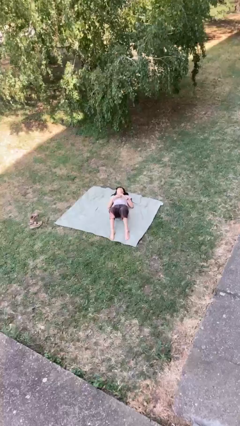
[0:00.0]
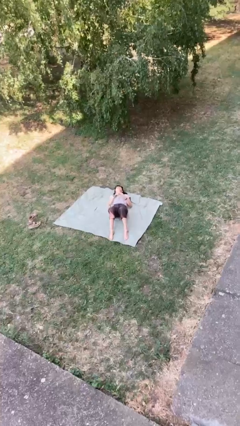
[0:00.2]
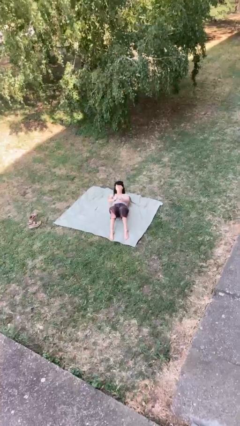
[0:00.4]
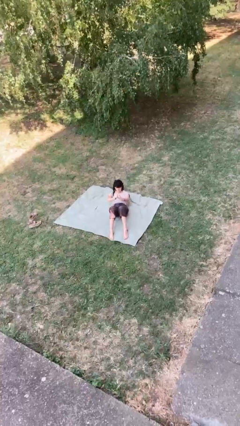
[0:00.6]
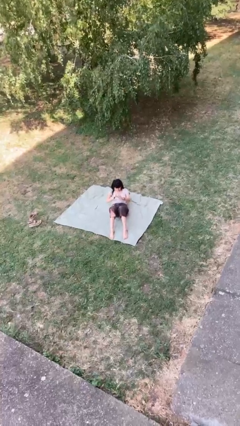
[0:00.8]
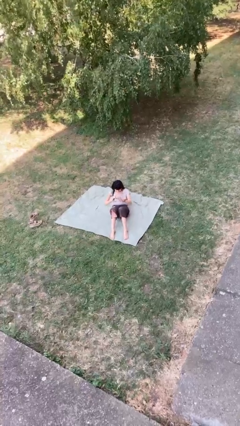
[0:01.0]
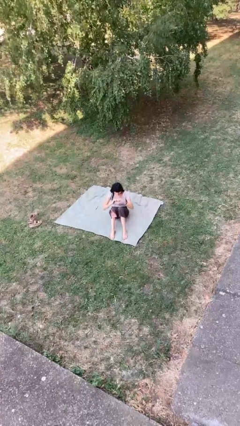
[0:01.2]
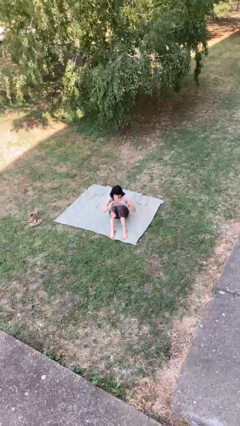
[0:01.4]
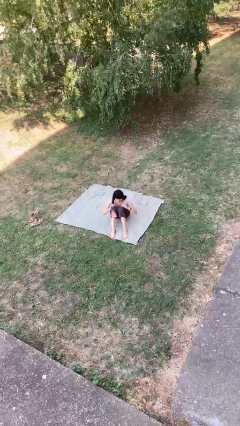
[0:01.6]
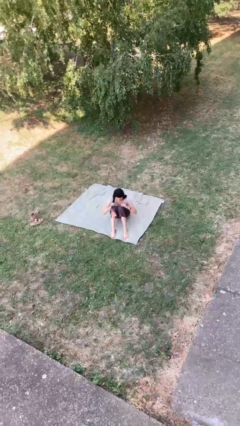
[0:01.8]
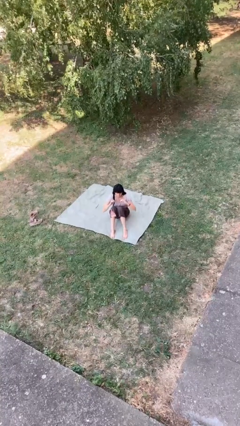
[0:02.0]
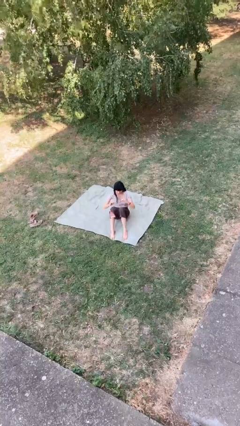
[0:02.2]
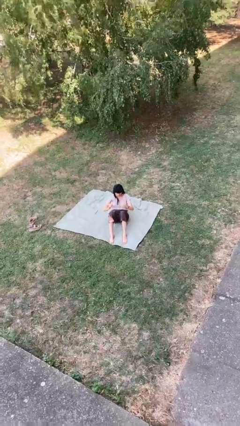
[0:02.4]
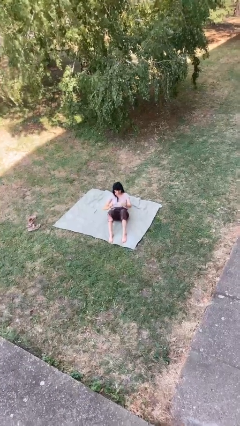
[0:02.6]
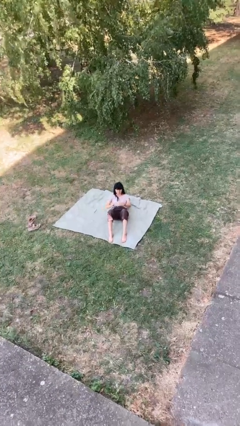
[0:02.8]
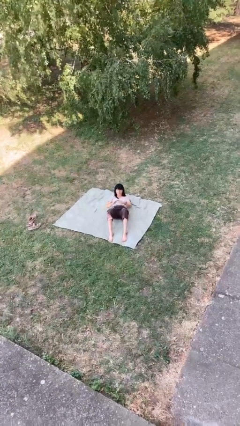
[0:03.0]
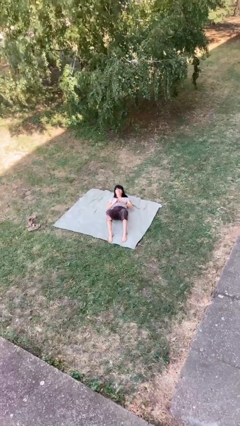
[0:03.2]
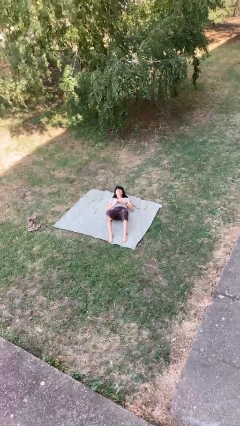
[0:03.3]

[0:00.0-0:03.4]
person exercises with situp

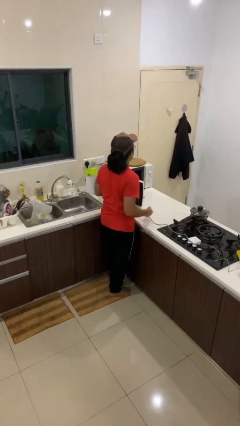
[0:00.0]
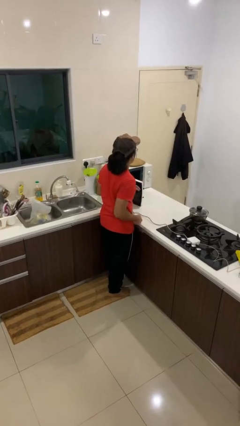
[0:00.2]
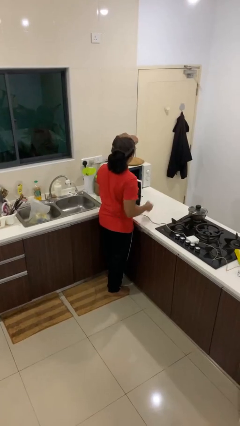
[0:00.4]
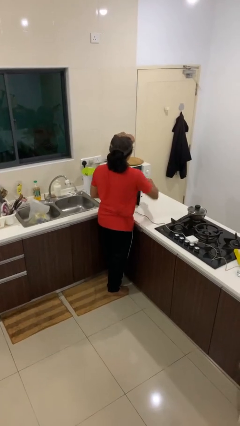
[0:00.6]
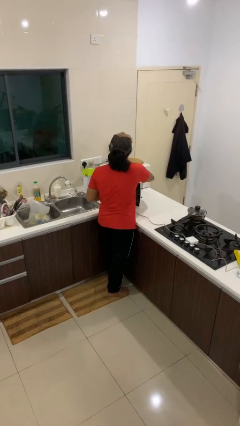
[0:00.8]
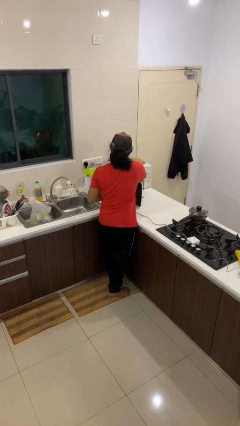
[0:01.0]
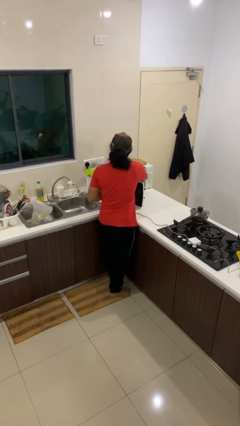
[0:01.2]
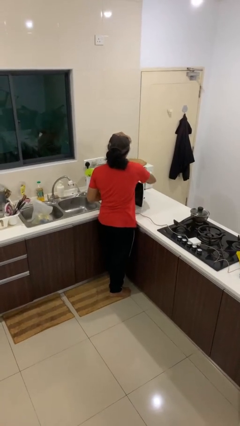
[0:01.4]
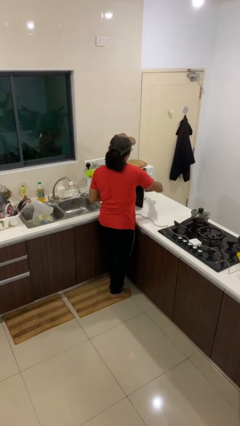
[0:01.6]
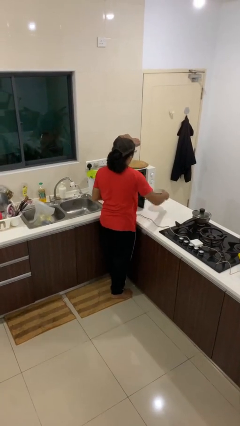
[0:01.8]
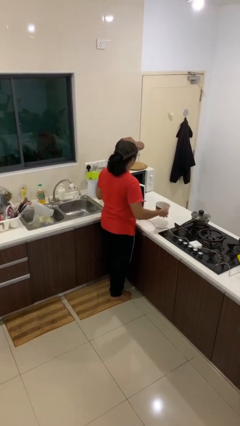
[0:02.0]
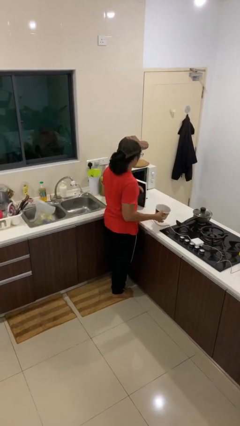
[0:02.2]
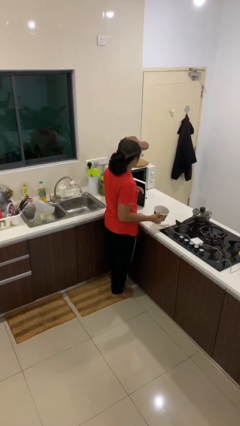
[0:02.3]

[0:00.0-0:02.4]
person takes object from microwave

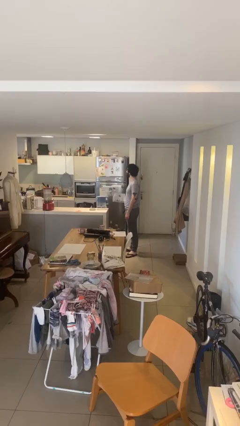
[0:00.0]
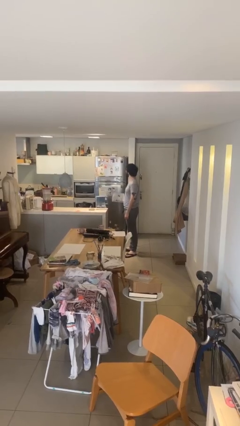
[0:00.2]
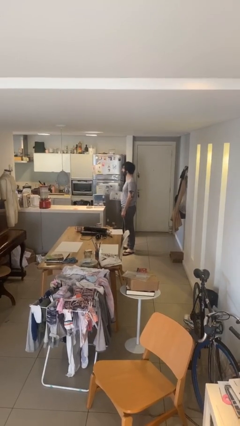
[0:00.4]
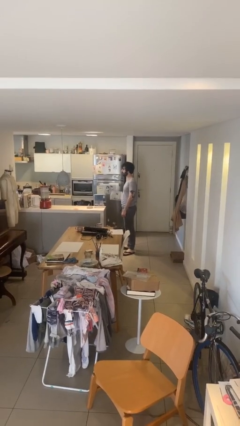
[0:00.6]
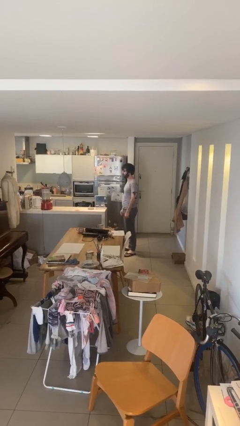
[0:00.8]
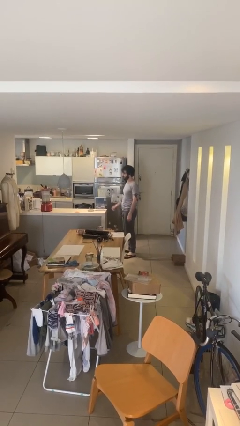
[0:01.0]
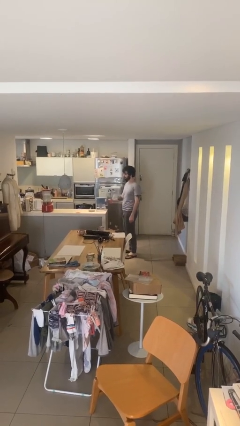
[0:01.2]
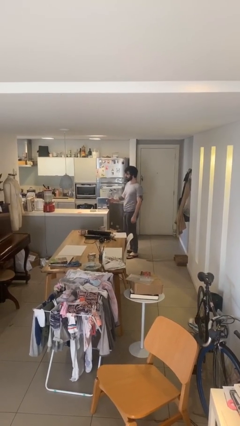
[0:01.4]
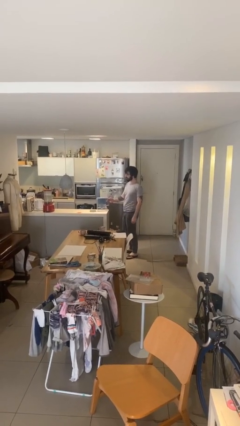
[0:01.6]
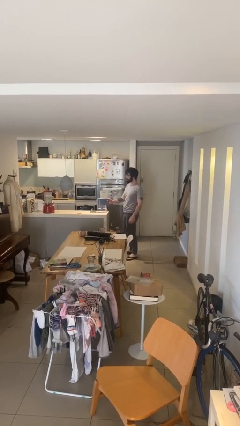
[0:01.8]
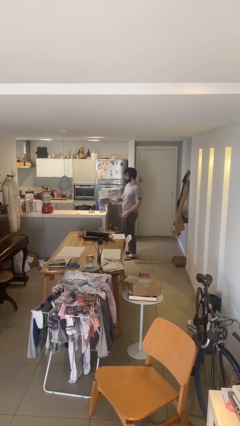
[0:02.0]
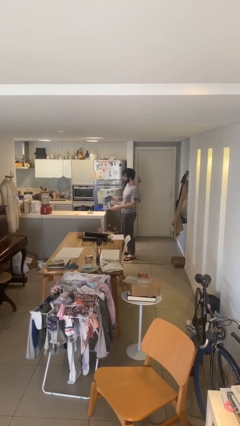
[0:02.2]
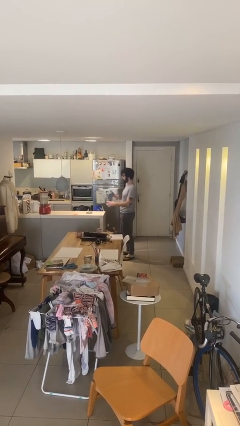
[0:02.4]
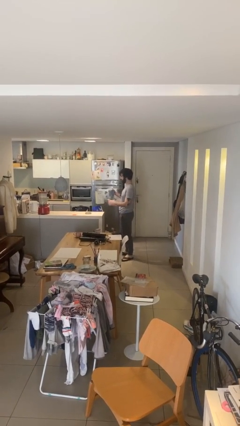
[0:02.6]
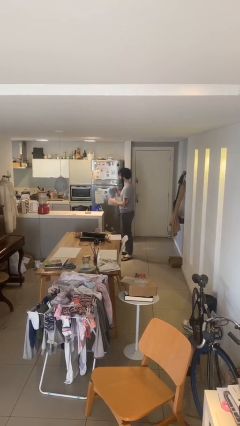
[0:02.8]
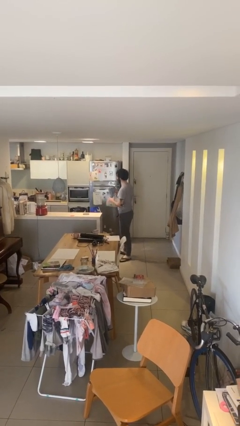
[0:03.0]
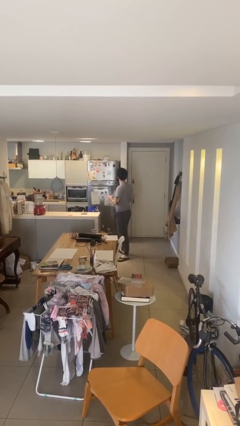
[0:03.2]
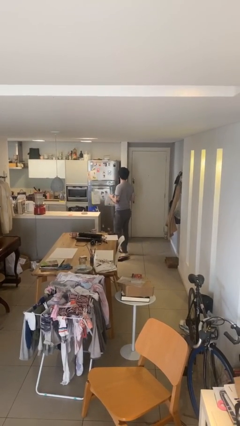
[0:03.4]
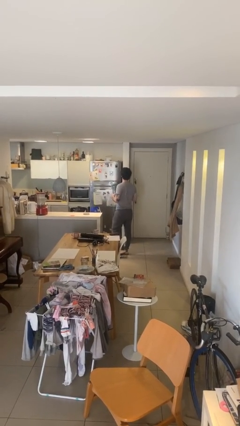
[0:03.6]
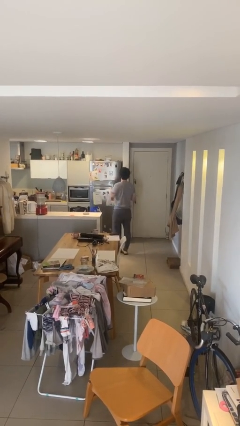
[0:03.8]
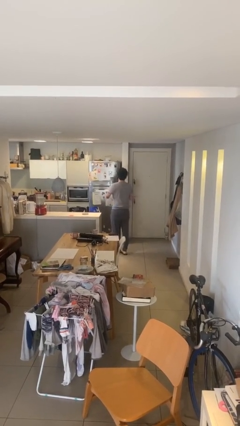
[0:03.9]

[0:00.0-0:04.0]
person picks up object from table

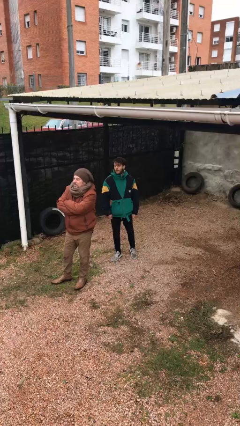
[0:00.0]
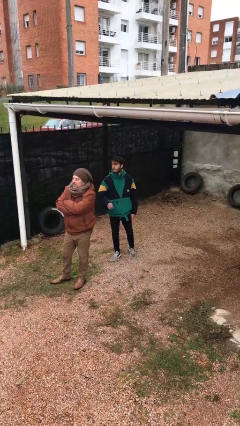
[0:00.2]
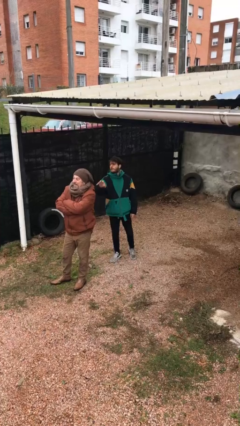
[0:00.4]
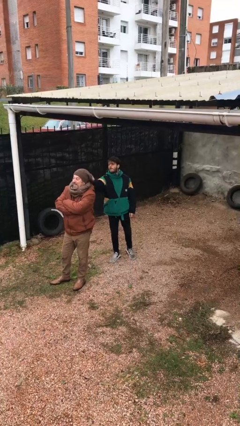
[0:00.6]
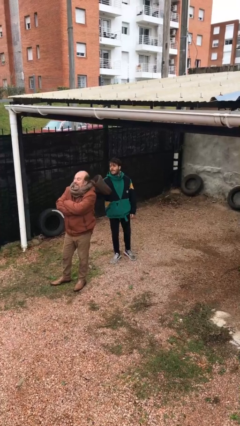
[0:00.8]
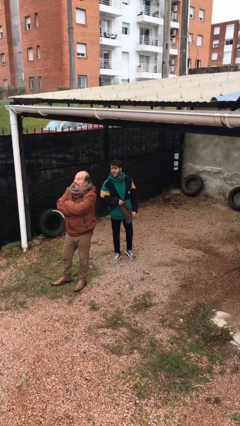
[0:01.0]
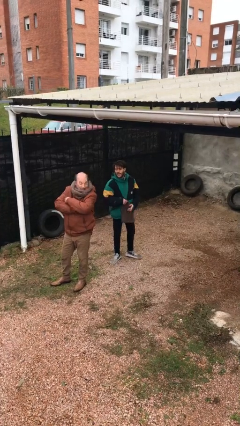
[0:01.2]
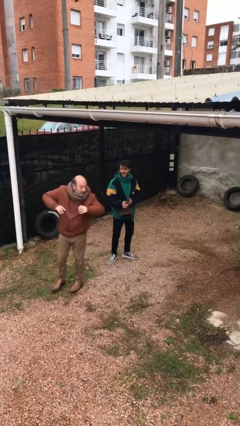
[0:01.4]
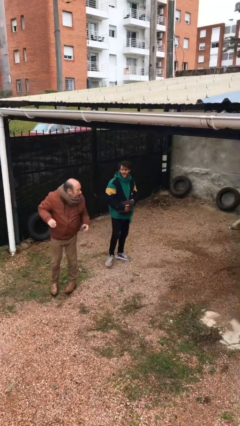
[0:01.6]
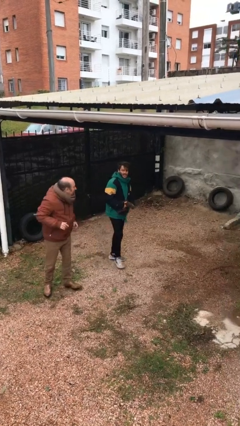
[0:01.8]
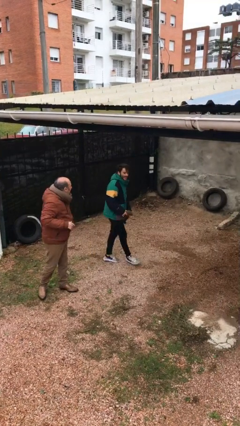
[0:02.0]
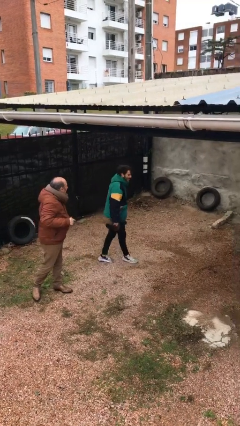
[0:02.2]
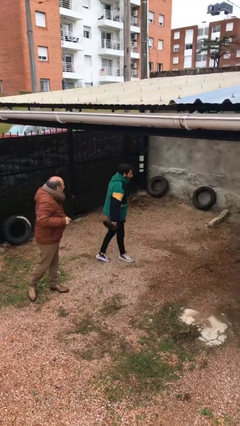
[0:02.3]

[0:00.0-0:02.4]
person steals object from person

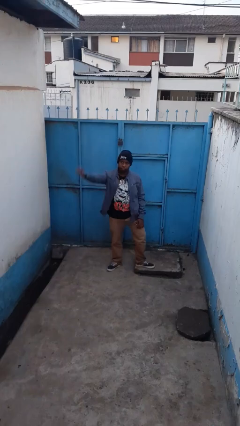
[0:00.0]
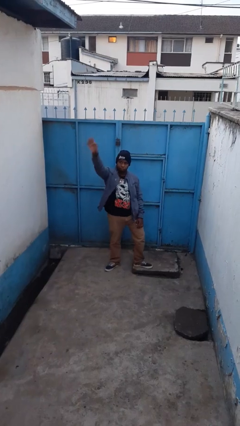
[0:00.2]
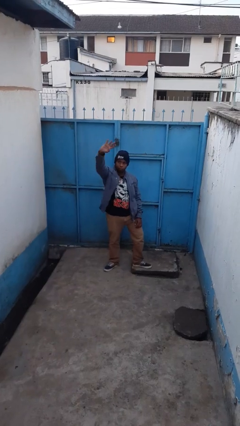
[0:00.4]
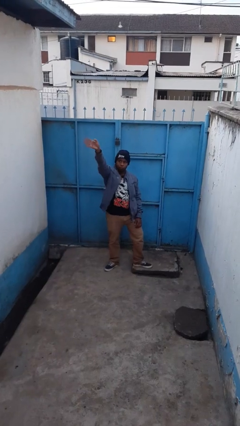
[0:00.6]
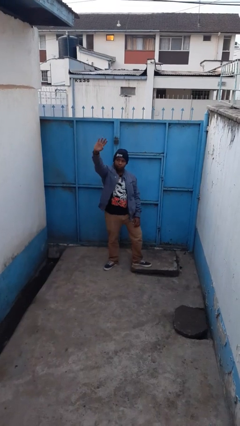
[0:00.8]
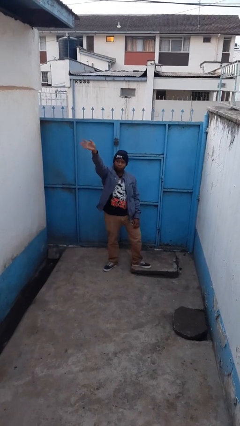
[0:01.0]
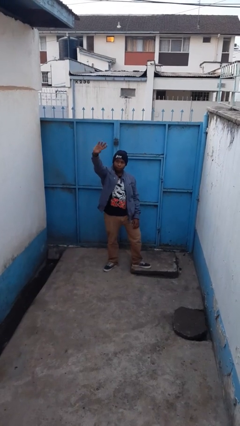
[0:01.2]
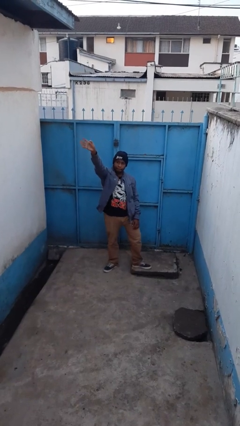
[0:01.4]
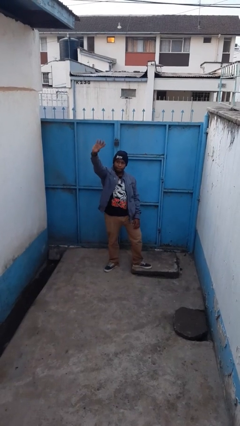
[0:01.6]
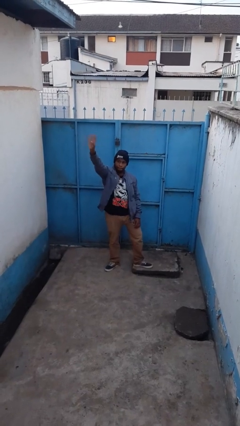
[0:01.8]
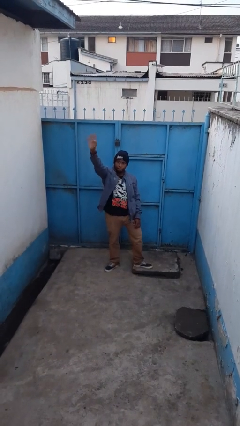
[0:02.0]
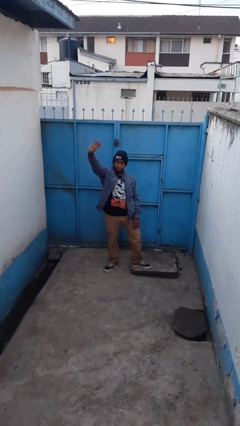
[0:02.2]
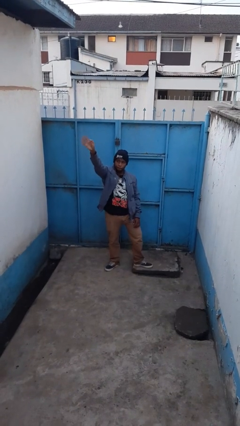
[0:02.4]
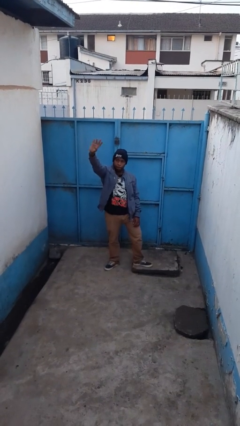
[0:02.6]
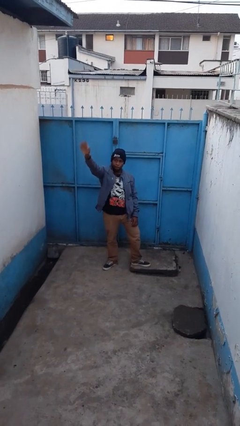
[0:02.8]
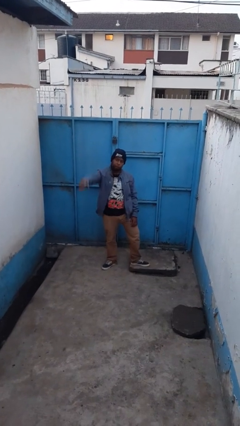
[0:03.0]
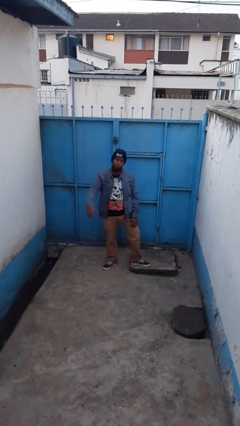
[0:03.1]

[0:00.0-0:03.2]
person waves at person

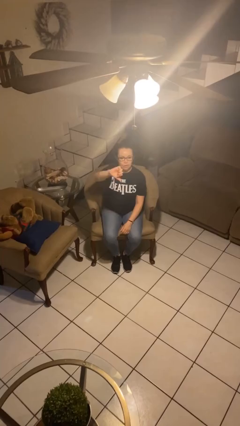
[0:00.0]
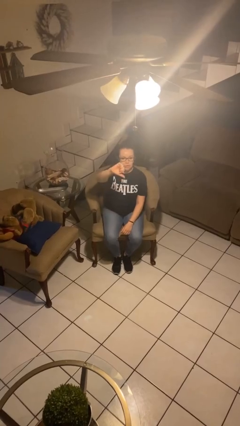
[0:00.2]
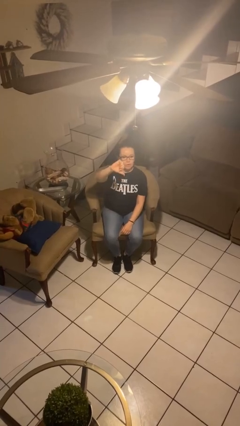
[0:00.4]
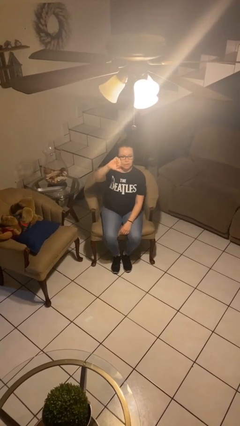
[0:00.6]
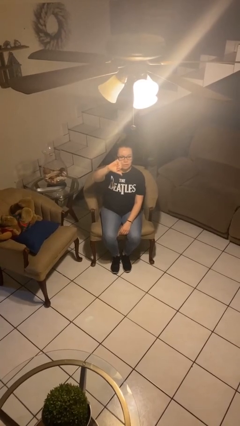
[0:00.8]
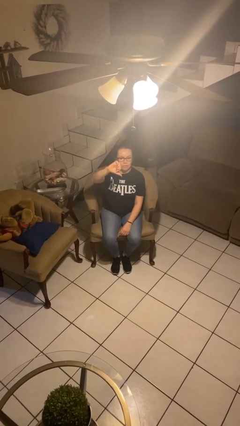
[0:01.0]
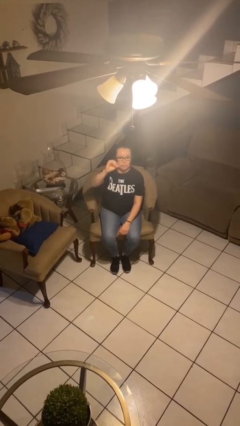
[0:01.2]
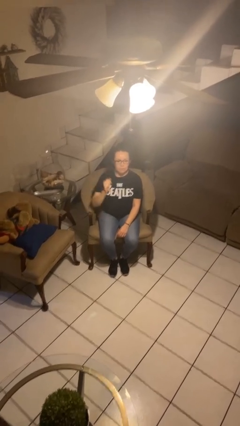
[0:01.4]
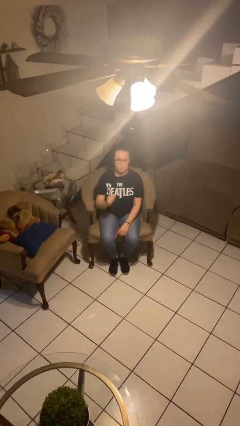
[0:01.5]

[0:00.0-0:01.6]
person gestures thumbs down
